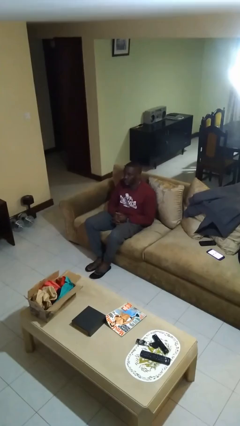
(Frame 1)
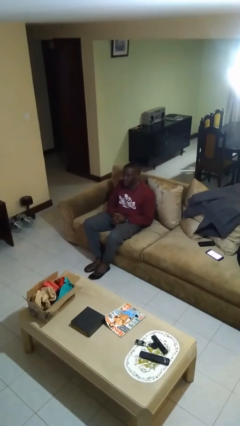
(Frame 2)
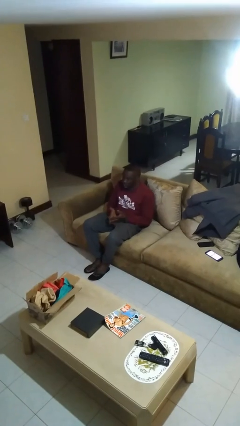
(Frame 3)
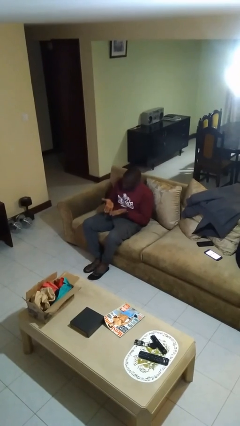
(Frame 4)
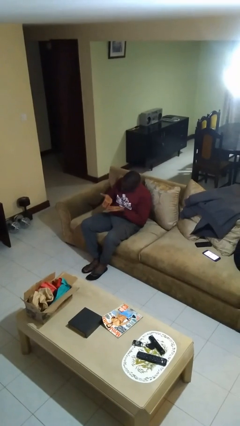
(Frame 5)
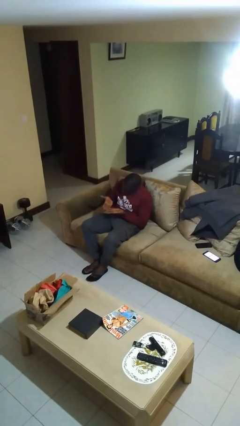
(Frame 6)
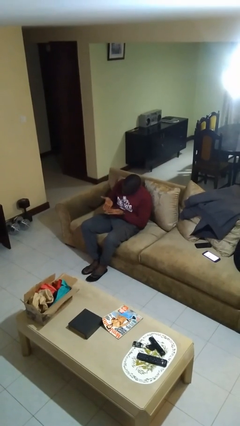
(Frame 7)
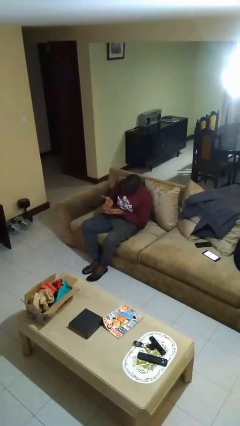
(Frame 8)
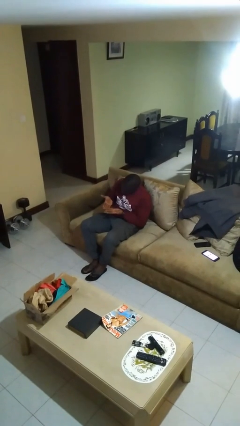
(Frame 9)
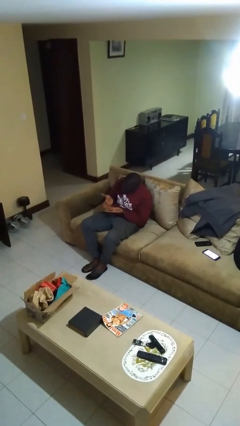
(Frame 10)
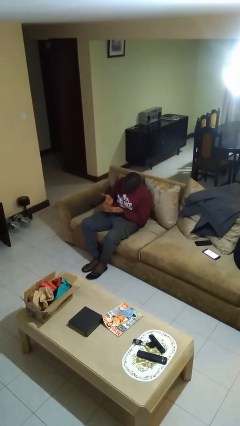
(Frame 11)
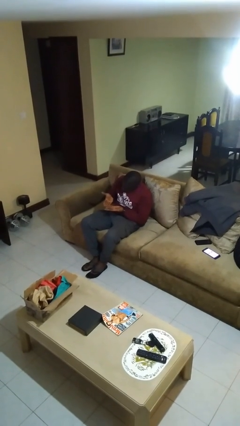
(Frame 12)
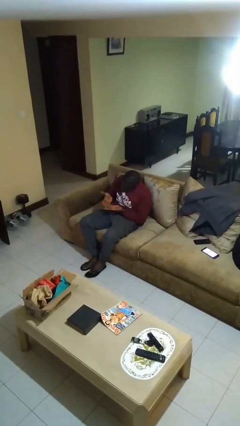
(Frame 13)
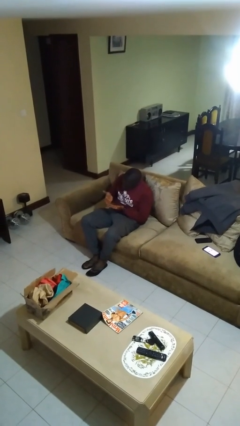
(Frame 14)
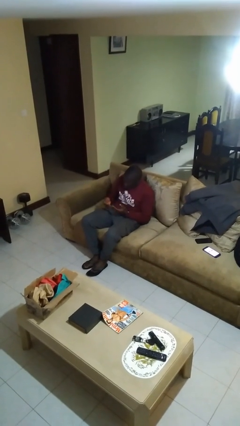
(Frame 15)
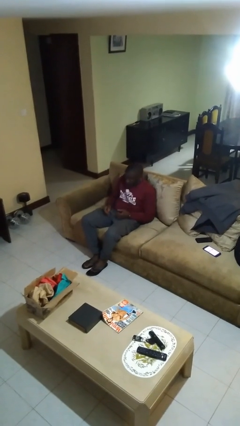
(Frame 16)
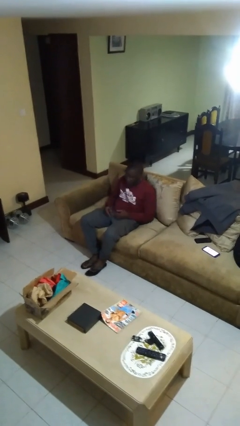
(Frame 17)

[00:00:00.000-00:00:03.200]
person looks at hands in lap

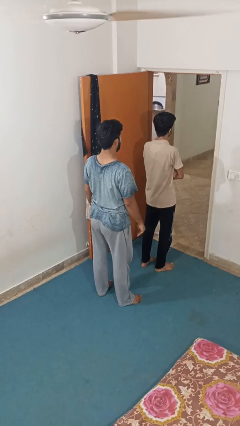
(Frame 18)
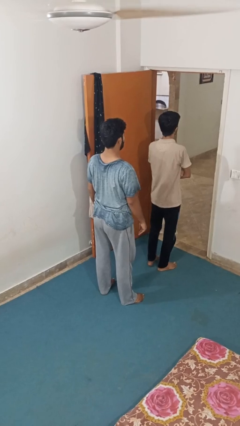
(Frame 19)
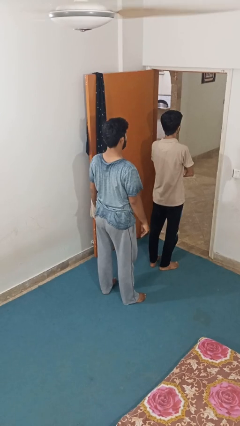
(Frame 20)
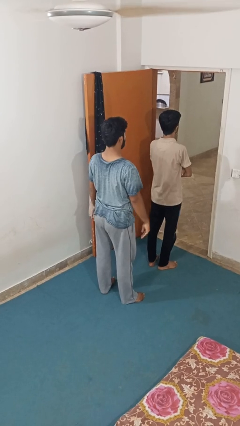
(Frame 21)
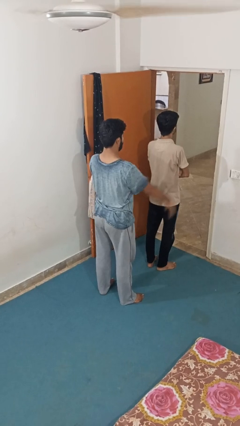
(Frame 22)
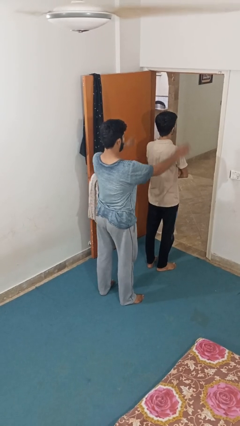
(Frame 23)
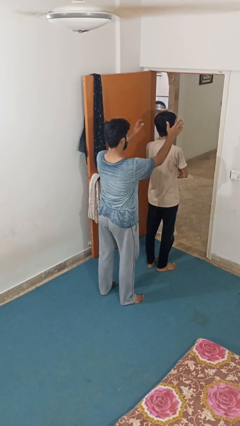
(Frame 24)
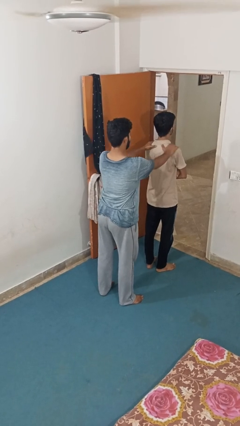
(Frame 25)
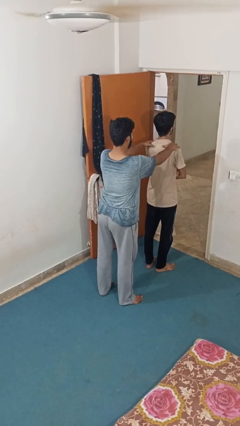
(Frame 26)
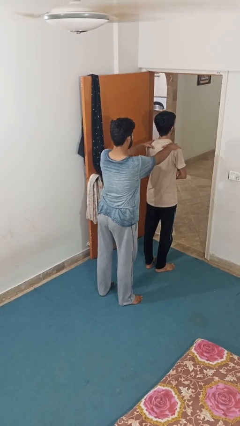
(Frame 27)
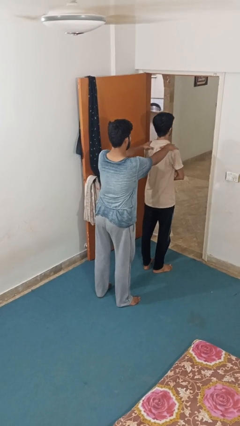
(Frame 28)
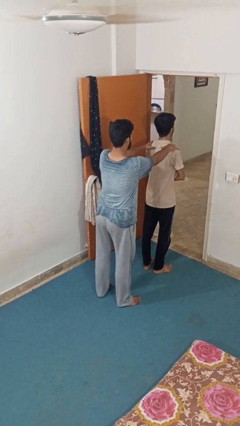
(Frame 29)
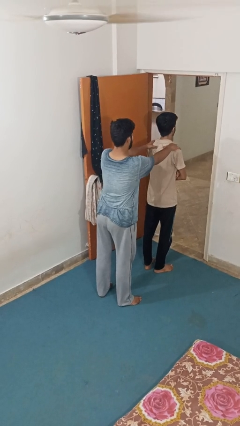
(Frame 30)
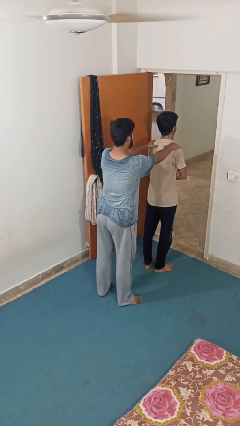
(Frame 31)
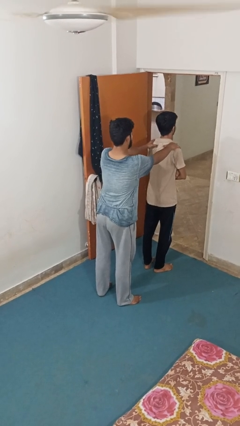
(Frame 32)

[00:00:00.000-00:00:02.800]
person grabs person by shoulder

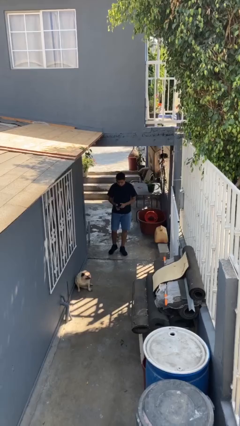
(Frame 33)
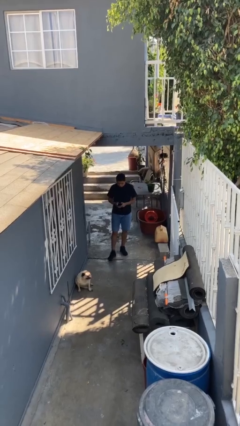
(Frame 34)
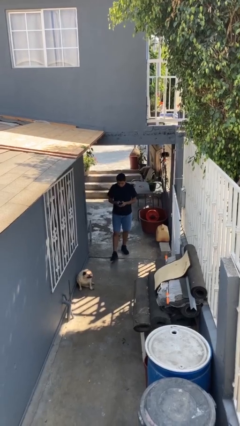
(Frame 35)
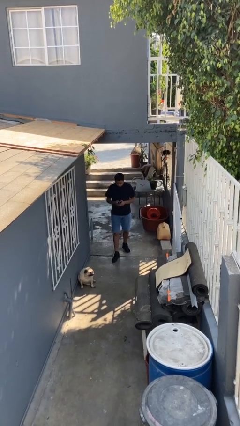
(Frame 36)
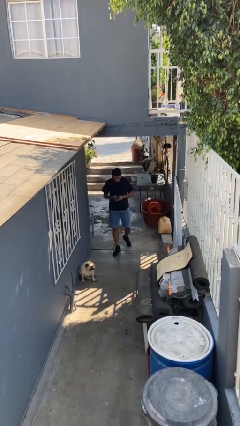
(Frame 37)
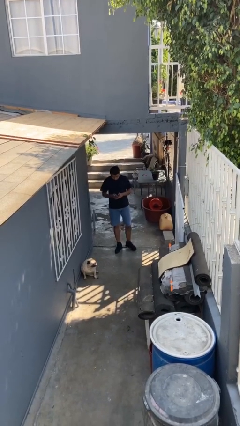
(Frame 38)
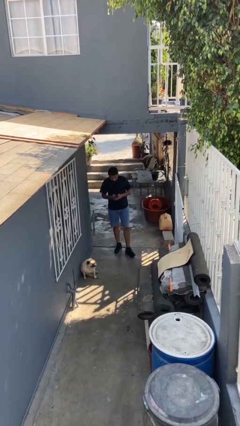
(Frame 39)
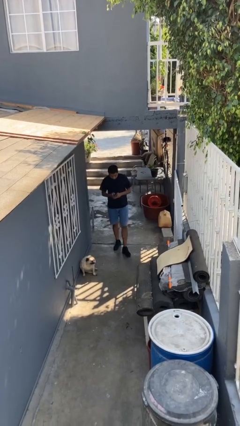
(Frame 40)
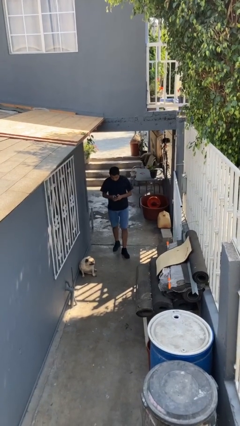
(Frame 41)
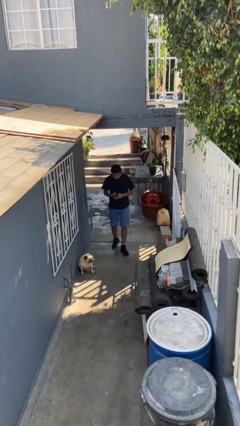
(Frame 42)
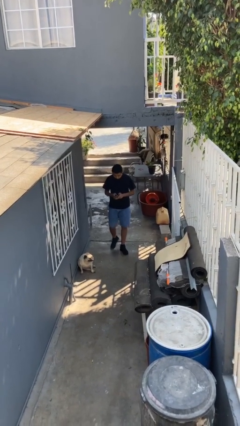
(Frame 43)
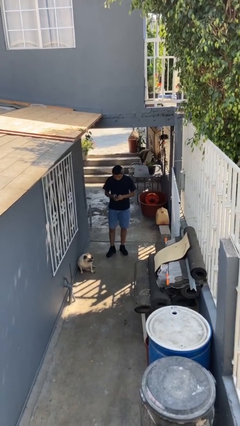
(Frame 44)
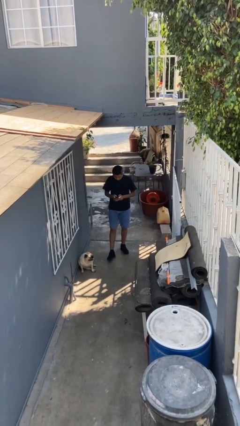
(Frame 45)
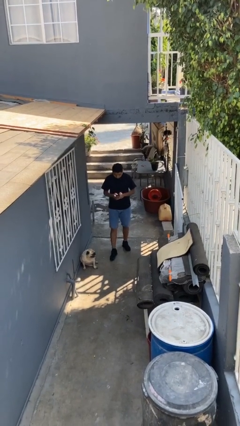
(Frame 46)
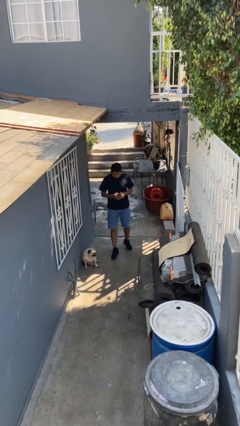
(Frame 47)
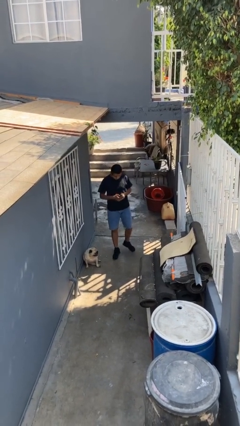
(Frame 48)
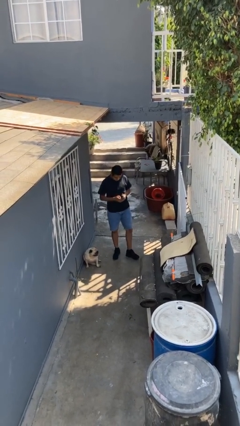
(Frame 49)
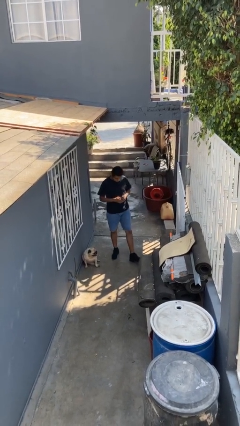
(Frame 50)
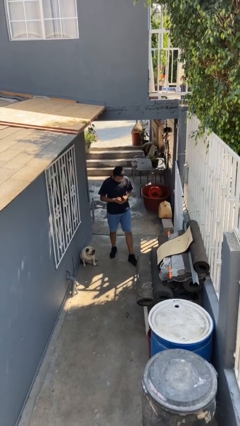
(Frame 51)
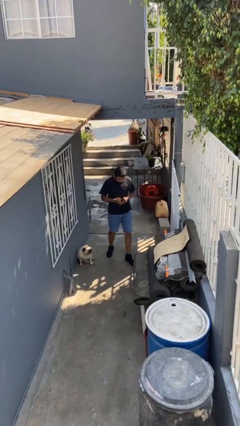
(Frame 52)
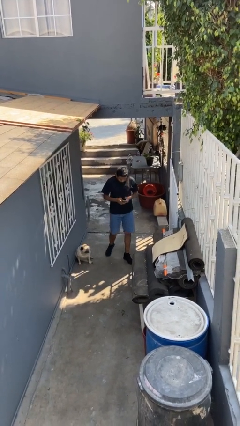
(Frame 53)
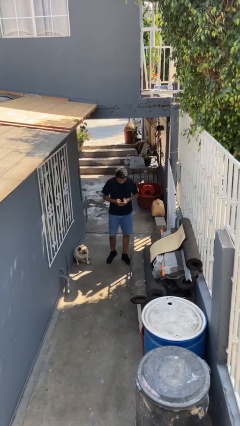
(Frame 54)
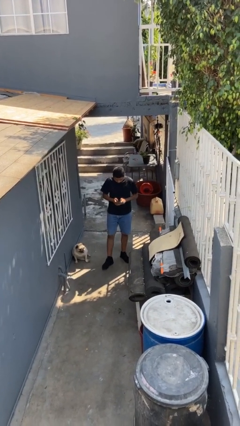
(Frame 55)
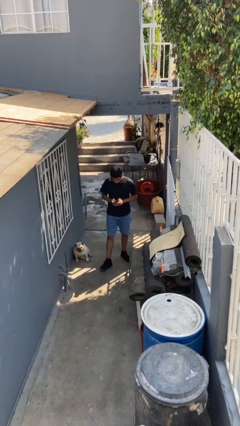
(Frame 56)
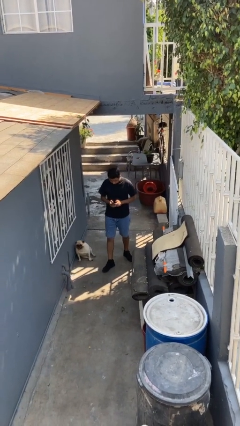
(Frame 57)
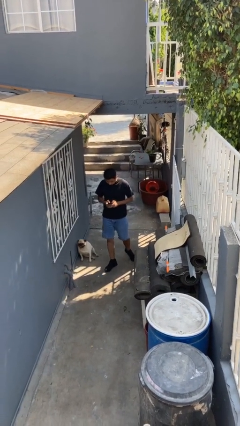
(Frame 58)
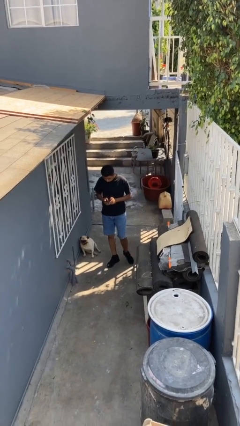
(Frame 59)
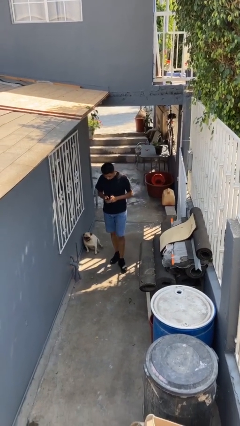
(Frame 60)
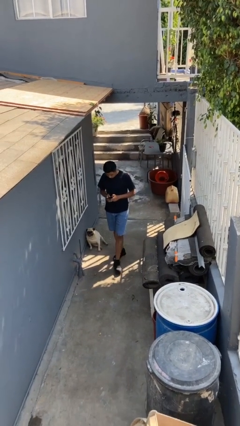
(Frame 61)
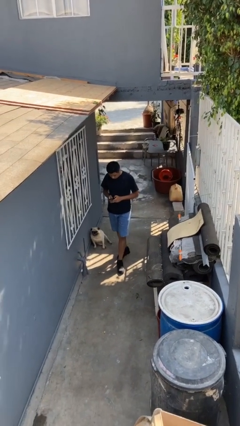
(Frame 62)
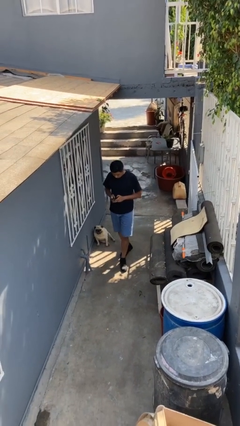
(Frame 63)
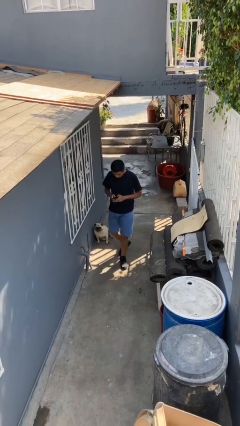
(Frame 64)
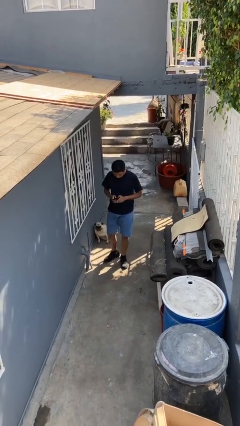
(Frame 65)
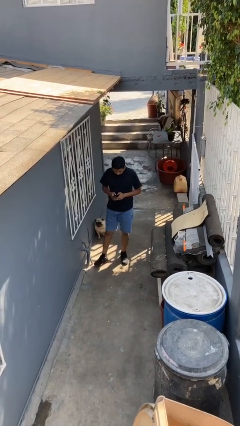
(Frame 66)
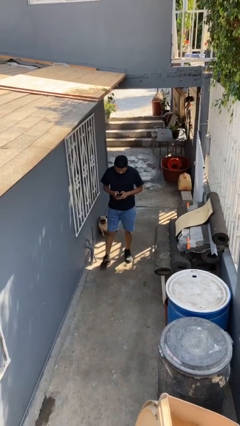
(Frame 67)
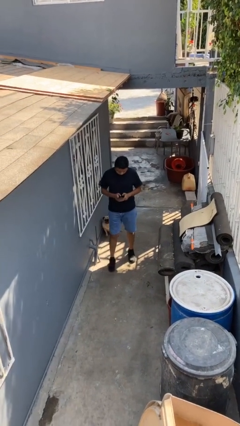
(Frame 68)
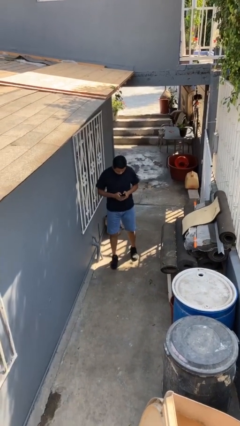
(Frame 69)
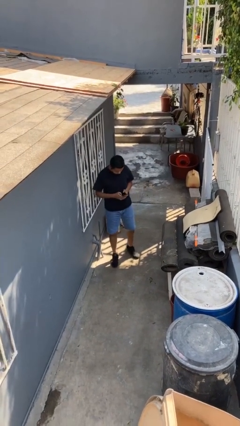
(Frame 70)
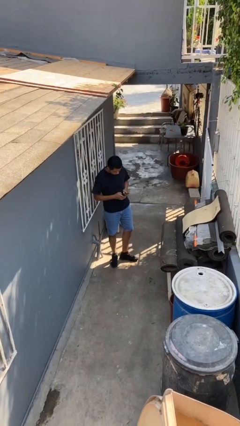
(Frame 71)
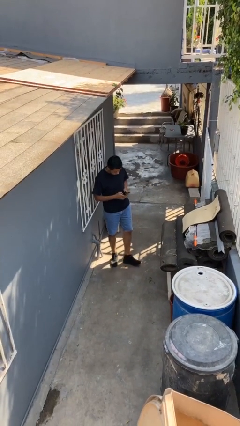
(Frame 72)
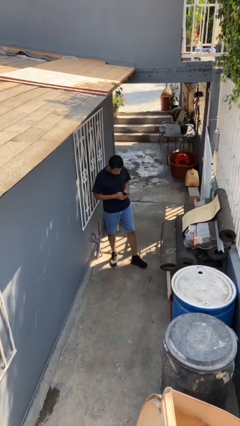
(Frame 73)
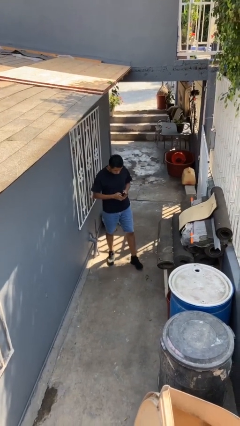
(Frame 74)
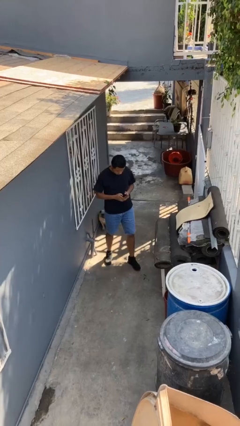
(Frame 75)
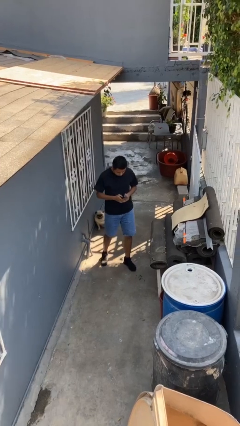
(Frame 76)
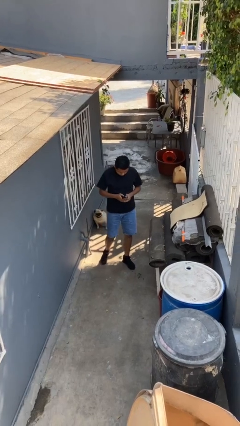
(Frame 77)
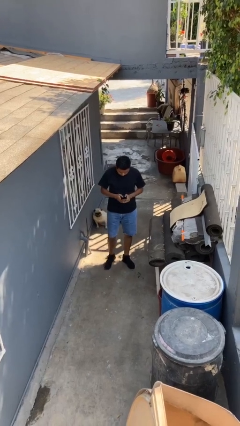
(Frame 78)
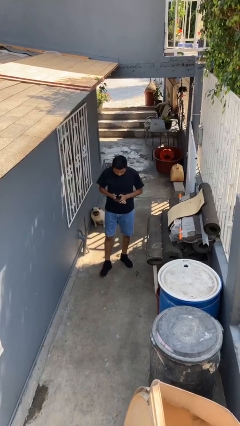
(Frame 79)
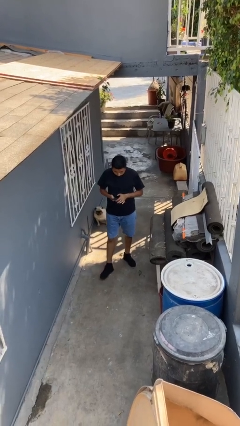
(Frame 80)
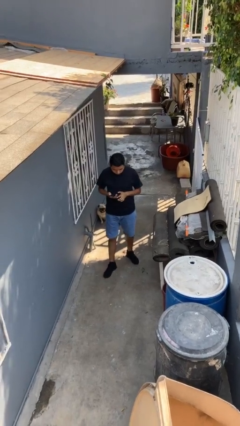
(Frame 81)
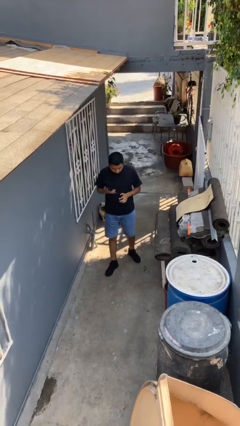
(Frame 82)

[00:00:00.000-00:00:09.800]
person texts on phone

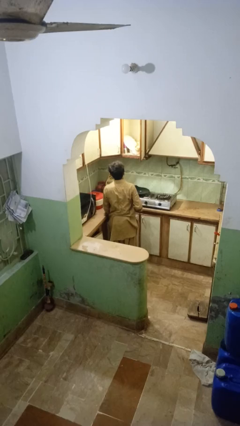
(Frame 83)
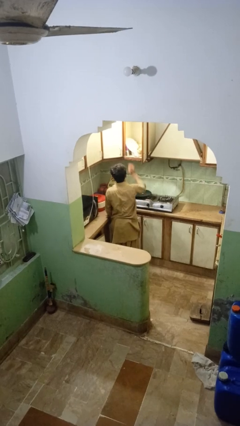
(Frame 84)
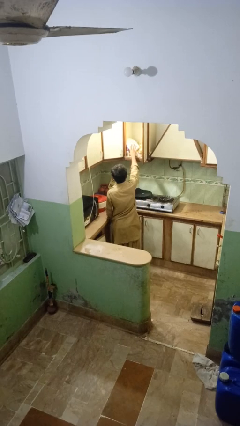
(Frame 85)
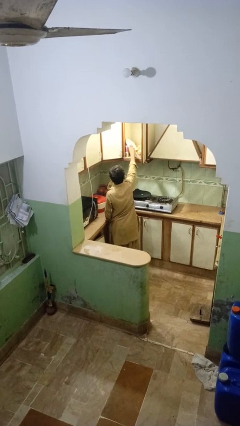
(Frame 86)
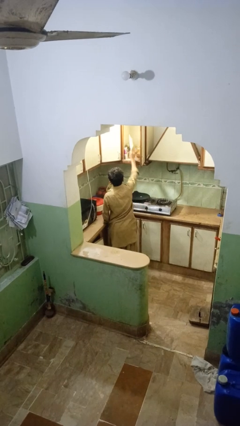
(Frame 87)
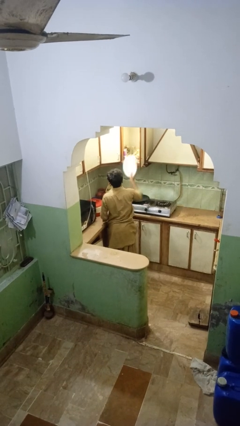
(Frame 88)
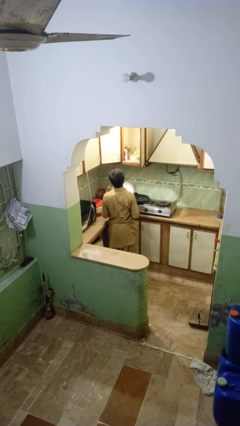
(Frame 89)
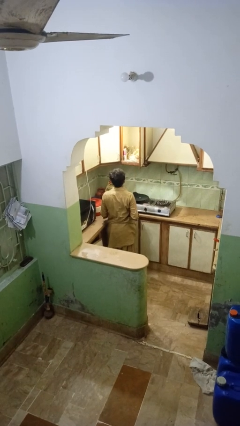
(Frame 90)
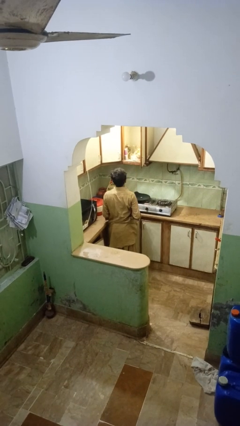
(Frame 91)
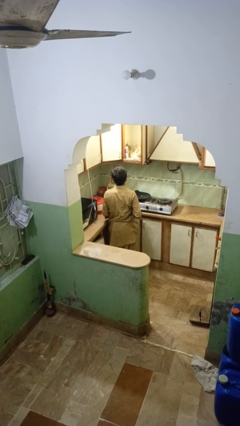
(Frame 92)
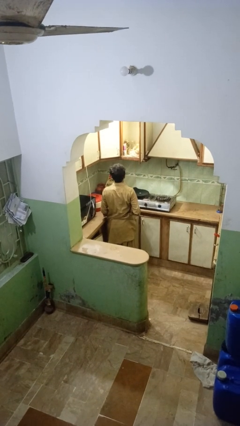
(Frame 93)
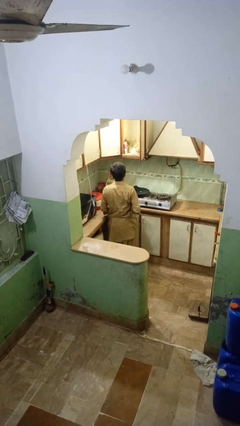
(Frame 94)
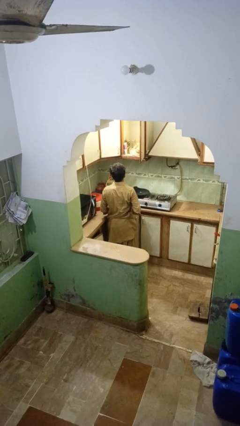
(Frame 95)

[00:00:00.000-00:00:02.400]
person takes object from cabinet
